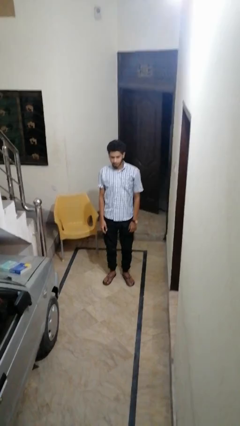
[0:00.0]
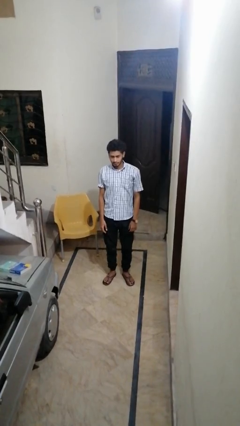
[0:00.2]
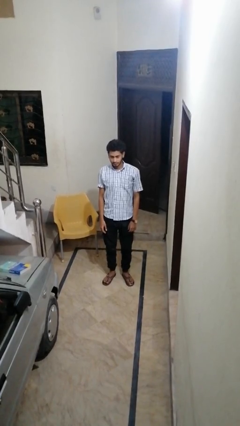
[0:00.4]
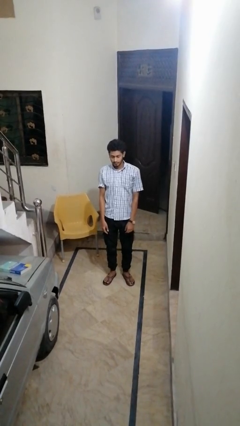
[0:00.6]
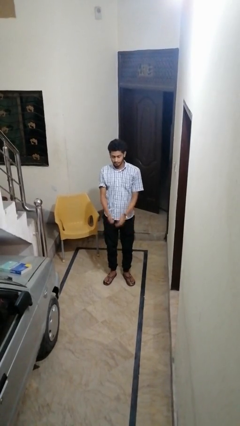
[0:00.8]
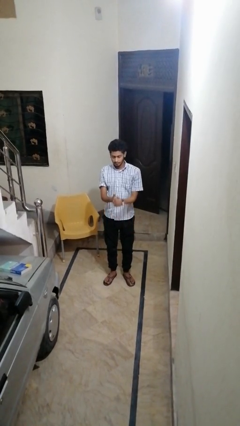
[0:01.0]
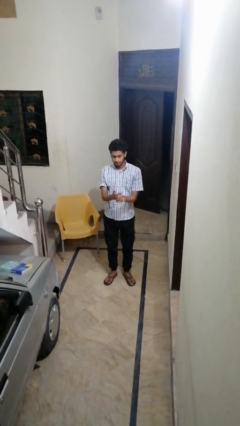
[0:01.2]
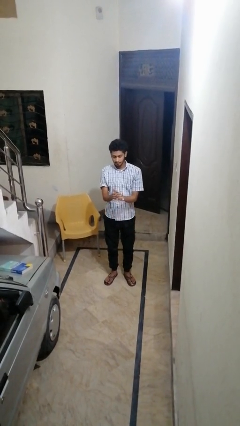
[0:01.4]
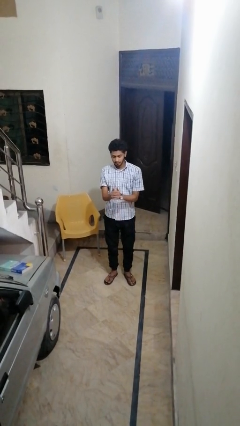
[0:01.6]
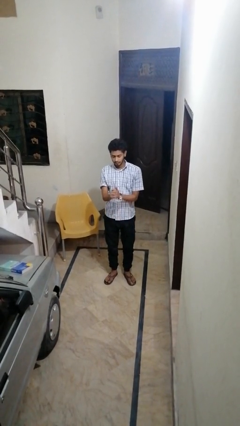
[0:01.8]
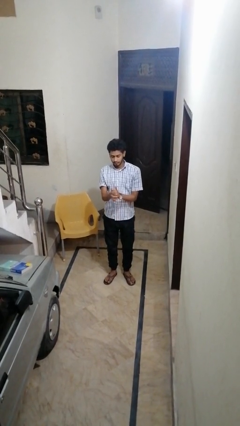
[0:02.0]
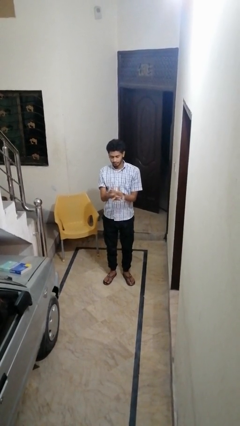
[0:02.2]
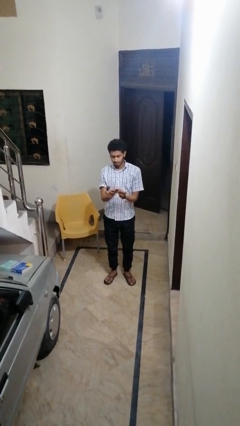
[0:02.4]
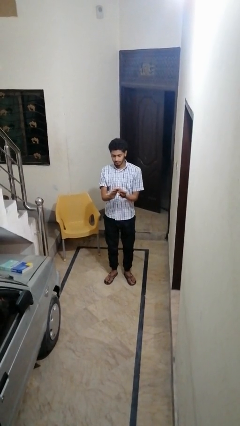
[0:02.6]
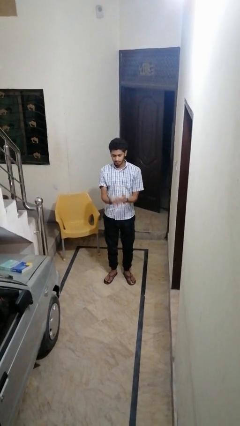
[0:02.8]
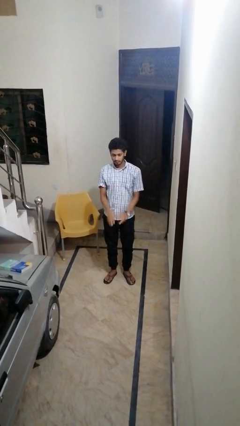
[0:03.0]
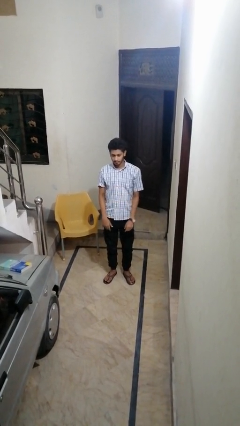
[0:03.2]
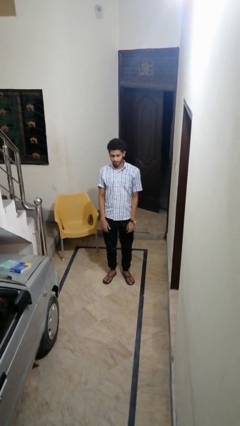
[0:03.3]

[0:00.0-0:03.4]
person cracks knuckles

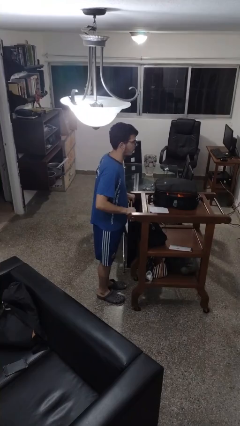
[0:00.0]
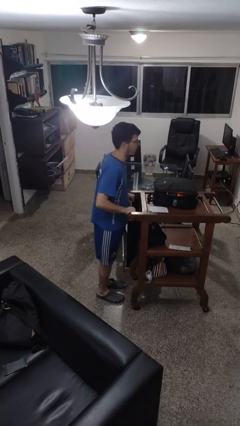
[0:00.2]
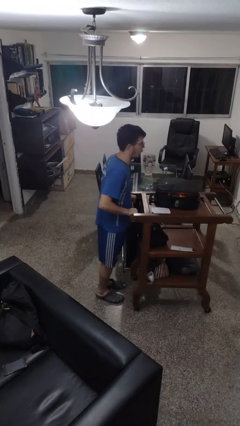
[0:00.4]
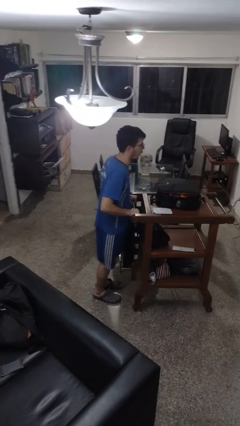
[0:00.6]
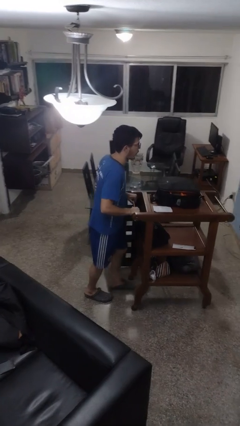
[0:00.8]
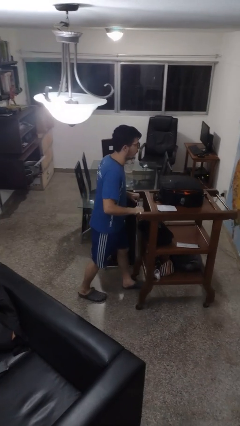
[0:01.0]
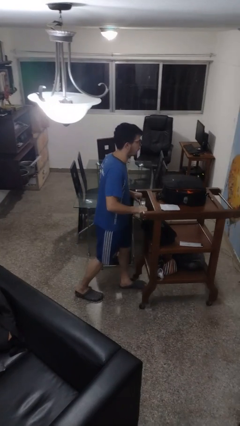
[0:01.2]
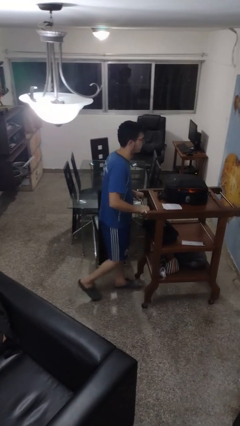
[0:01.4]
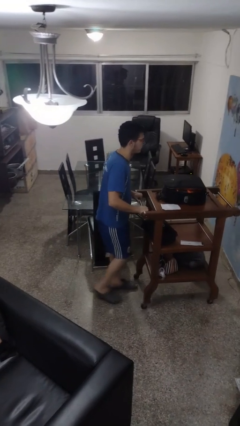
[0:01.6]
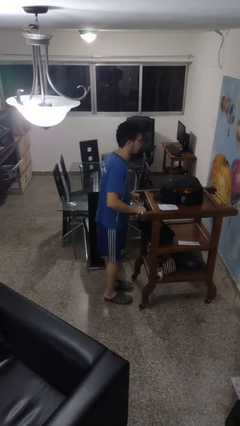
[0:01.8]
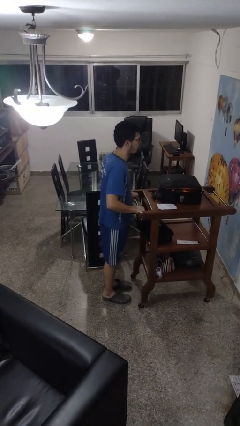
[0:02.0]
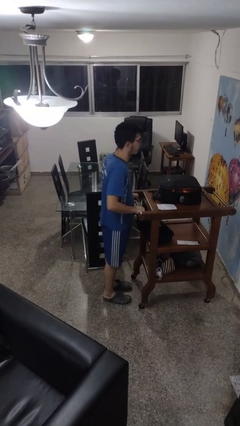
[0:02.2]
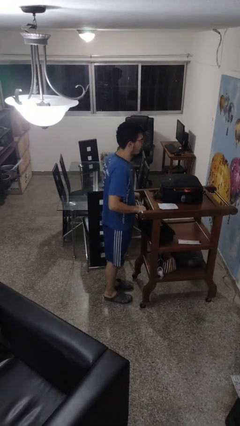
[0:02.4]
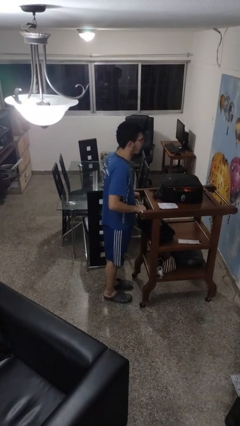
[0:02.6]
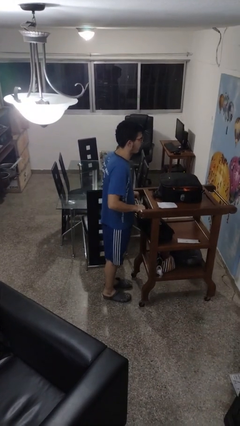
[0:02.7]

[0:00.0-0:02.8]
person pushes wheeled cart

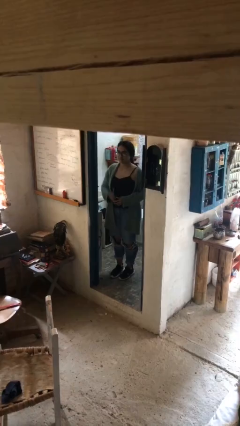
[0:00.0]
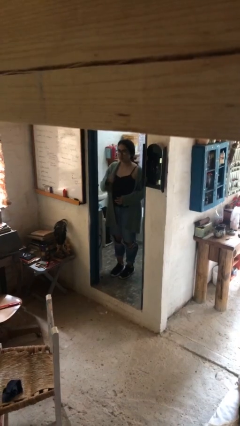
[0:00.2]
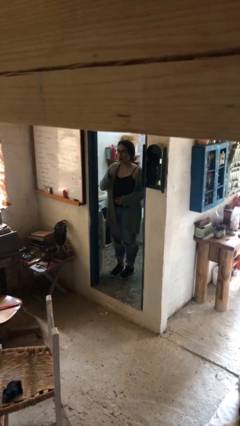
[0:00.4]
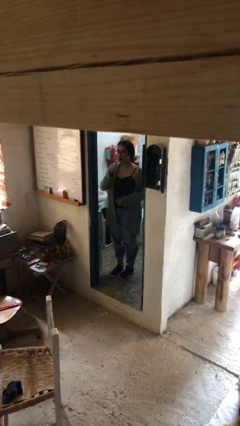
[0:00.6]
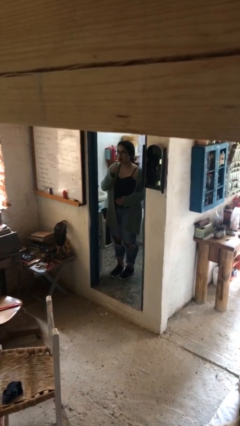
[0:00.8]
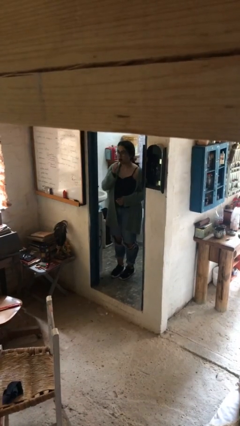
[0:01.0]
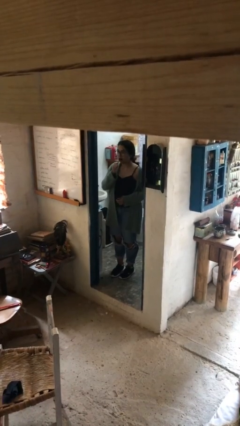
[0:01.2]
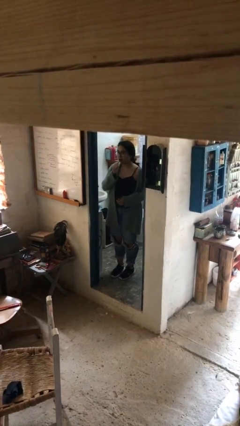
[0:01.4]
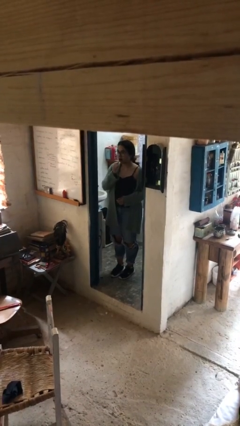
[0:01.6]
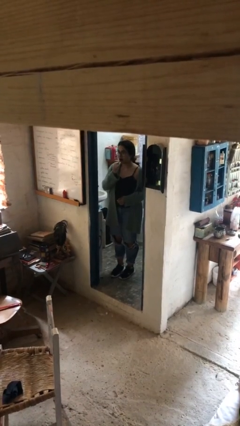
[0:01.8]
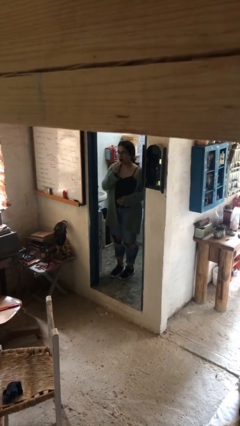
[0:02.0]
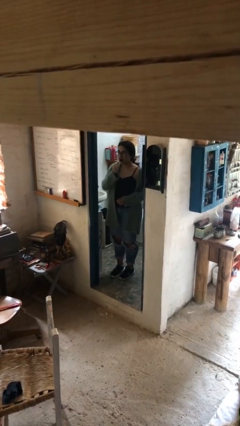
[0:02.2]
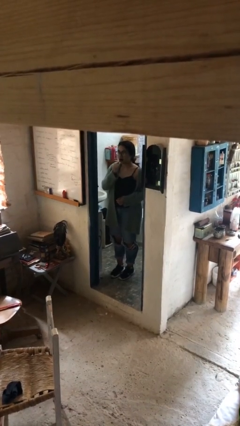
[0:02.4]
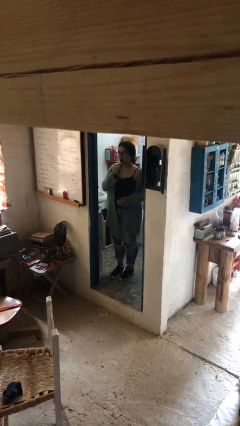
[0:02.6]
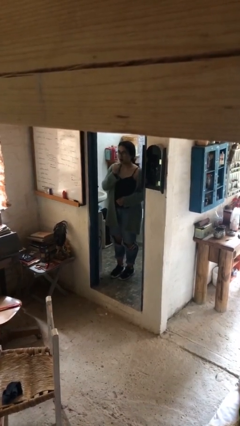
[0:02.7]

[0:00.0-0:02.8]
person brushes teeth

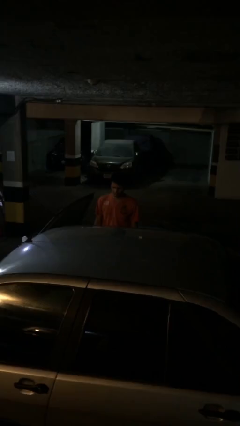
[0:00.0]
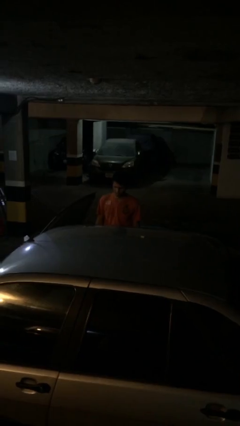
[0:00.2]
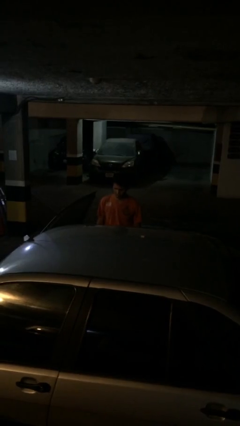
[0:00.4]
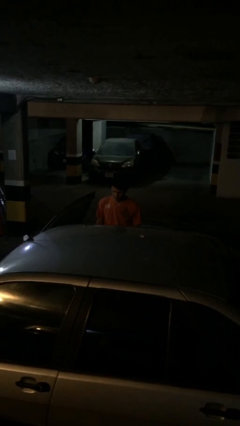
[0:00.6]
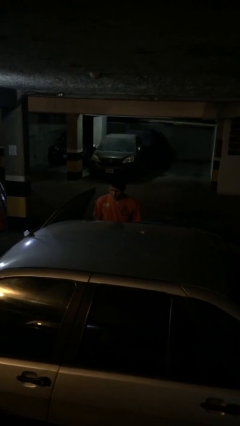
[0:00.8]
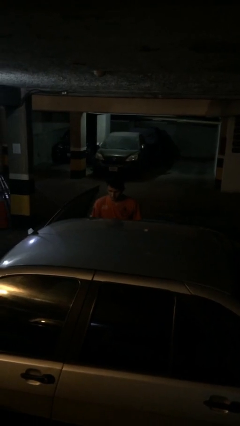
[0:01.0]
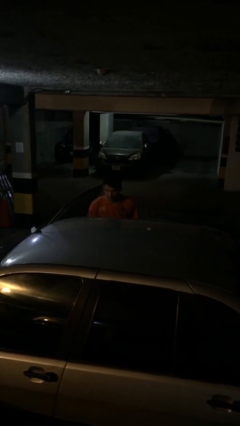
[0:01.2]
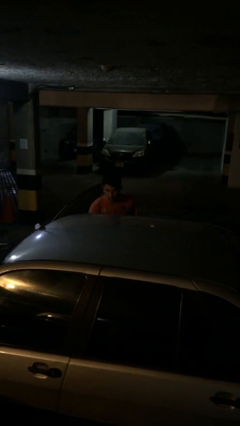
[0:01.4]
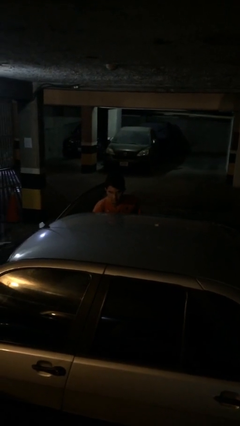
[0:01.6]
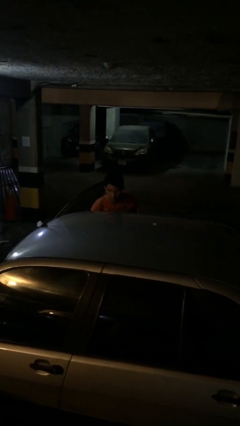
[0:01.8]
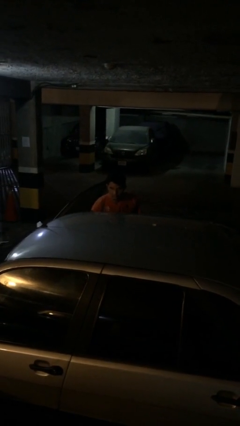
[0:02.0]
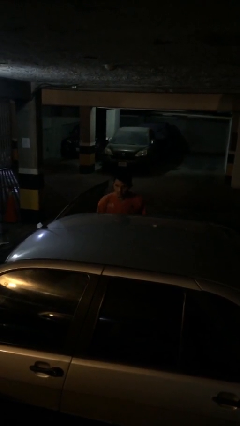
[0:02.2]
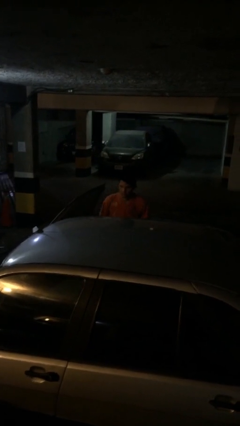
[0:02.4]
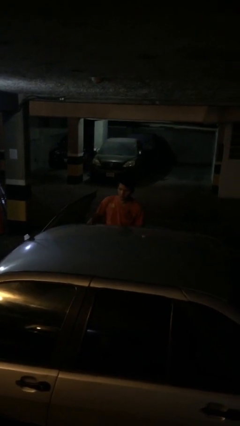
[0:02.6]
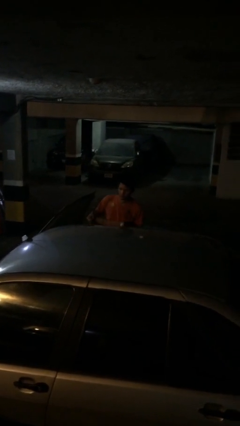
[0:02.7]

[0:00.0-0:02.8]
person unloads car

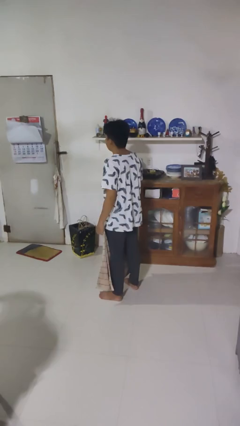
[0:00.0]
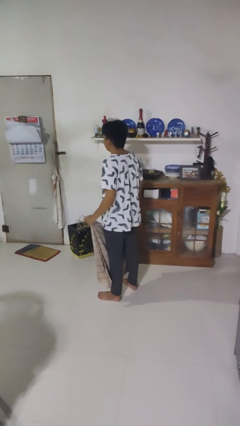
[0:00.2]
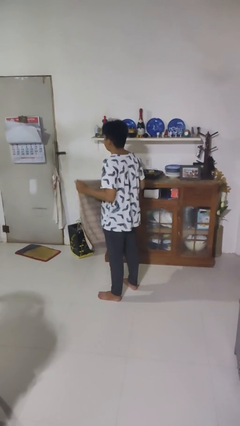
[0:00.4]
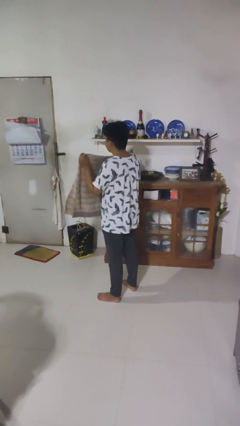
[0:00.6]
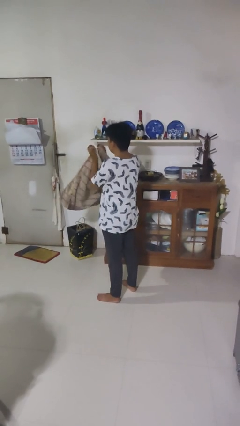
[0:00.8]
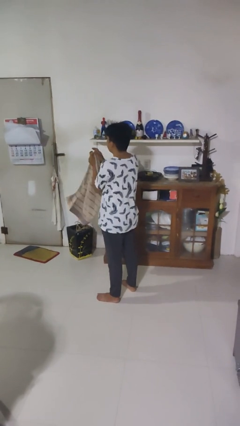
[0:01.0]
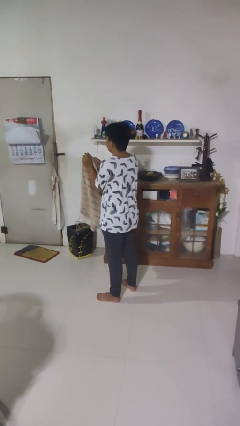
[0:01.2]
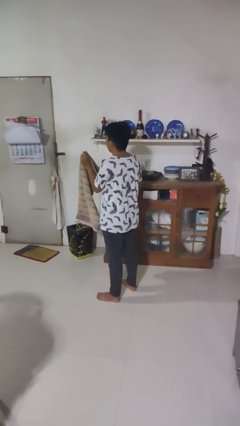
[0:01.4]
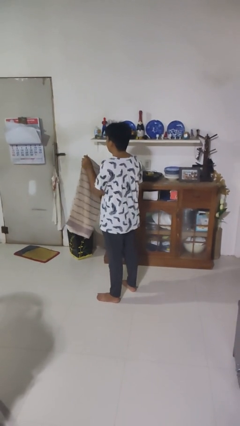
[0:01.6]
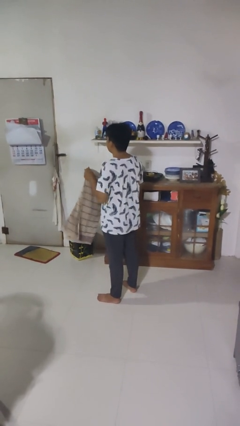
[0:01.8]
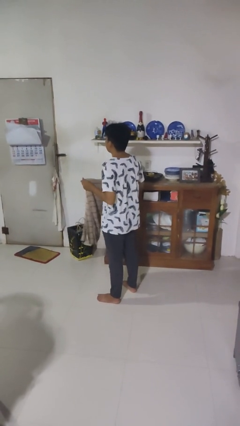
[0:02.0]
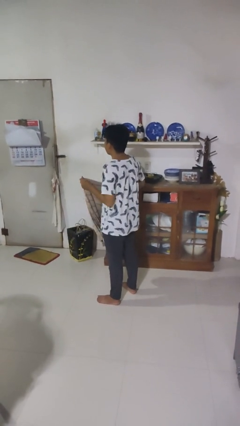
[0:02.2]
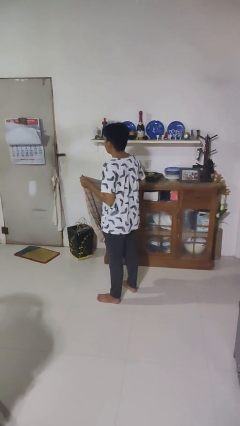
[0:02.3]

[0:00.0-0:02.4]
person folds blanket

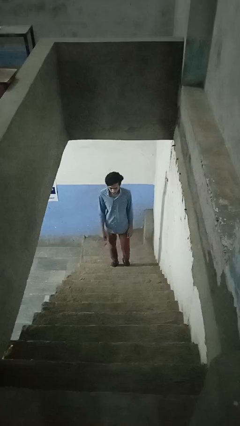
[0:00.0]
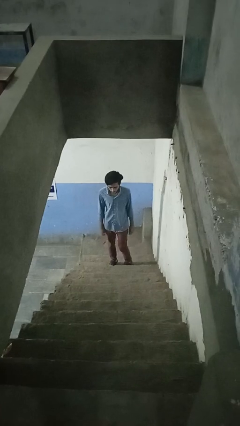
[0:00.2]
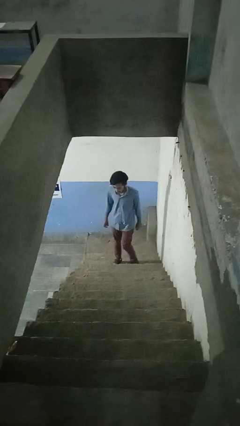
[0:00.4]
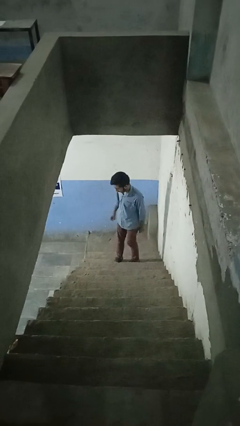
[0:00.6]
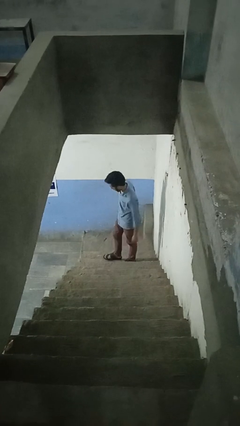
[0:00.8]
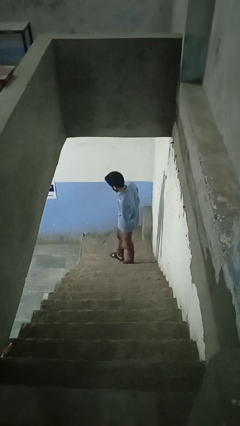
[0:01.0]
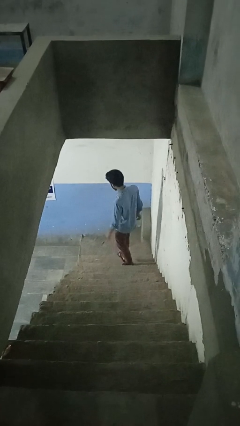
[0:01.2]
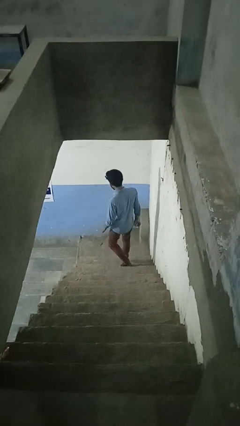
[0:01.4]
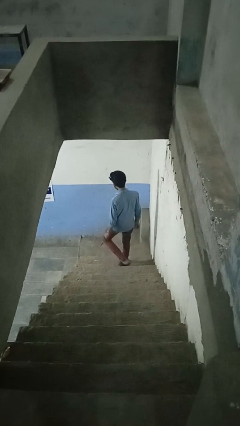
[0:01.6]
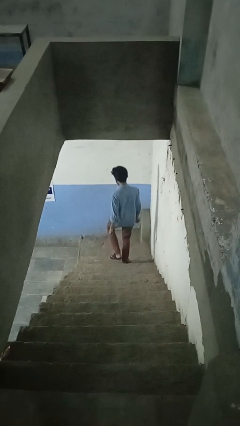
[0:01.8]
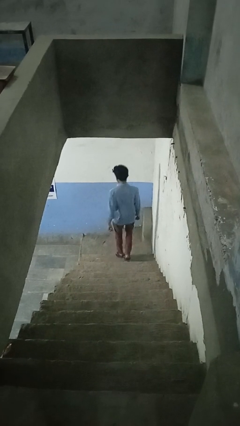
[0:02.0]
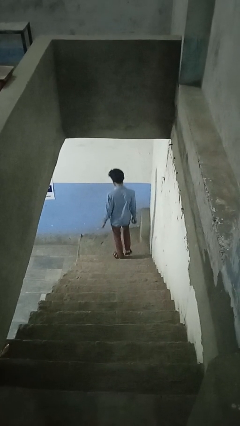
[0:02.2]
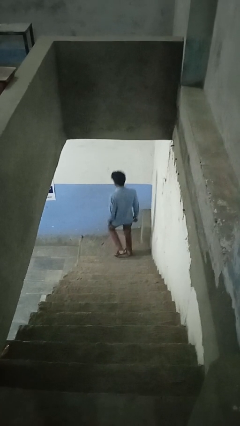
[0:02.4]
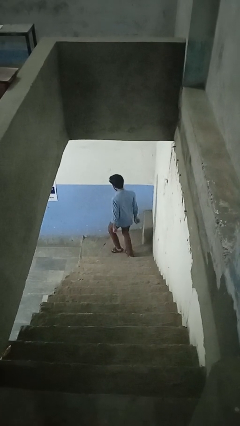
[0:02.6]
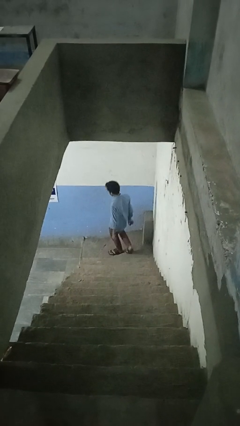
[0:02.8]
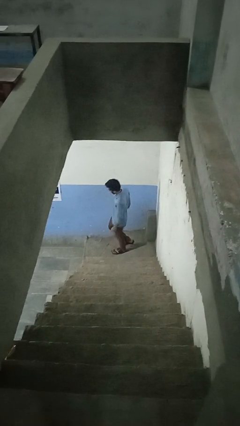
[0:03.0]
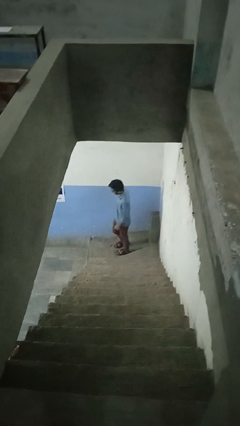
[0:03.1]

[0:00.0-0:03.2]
person climbs down stairs

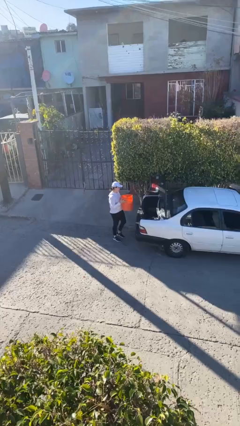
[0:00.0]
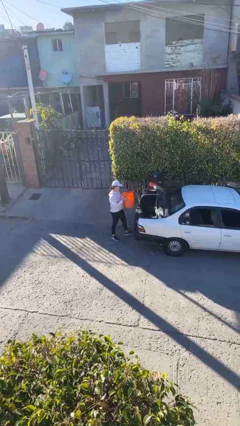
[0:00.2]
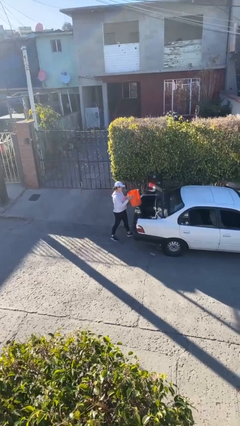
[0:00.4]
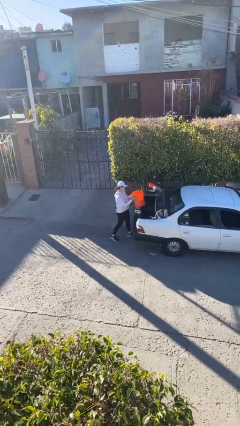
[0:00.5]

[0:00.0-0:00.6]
person loads car
